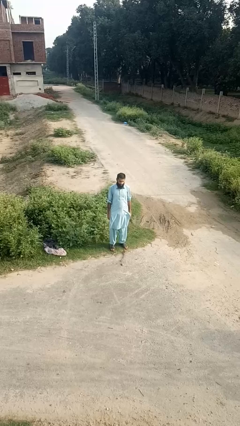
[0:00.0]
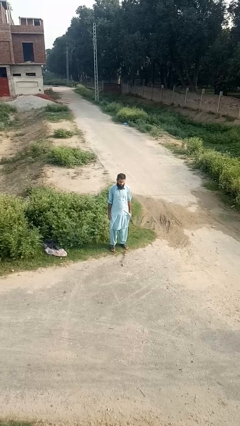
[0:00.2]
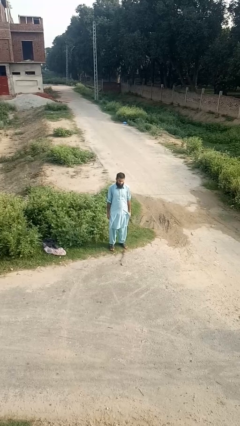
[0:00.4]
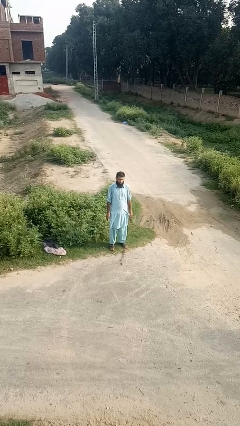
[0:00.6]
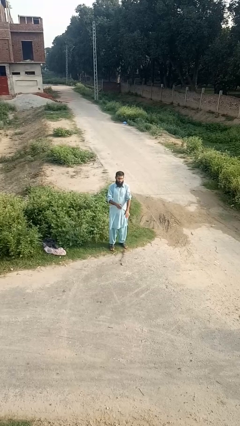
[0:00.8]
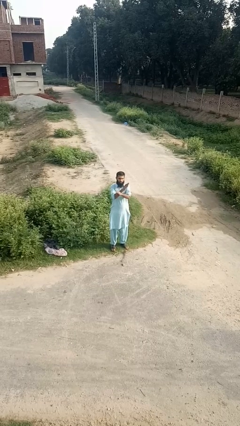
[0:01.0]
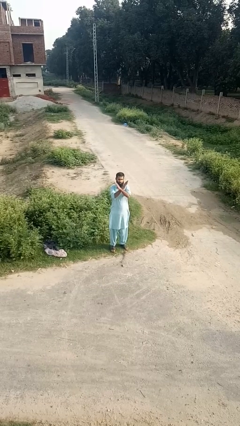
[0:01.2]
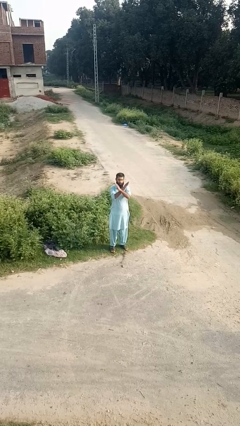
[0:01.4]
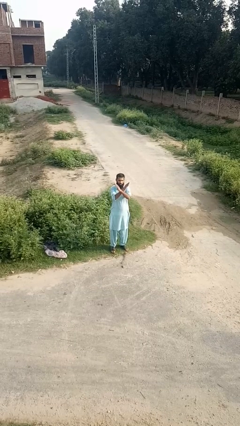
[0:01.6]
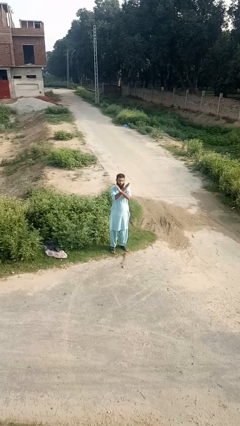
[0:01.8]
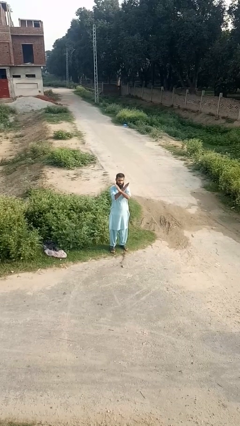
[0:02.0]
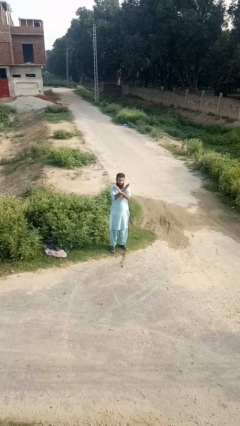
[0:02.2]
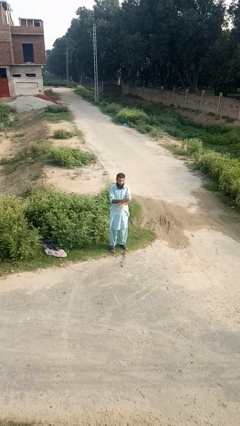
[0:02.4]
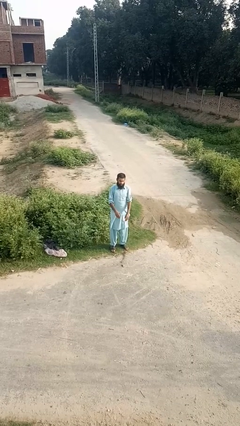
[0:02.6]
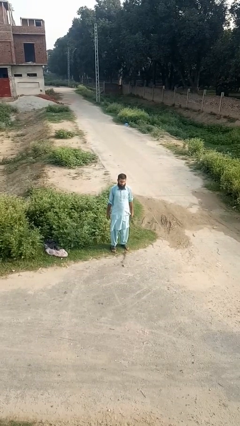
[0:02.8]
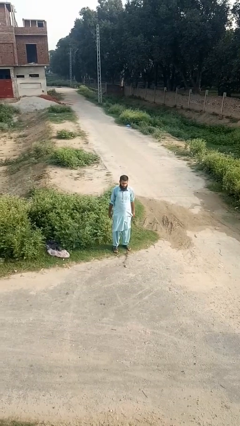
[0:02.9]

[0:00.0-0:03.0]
person crosses arms

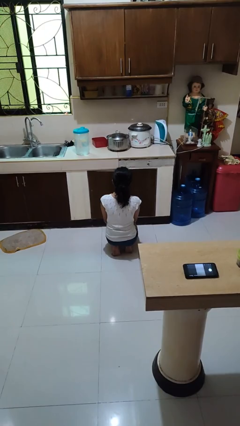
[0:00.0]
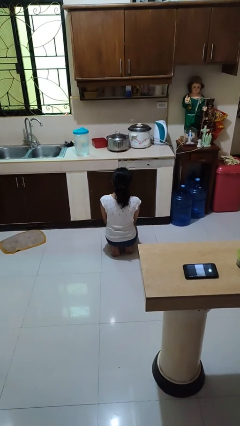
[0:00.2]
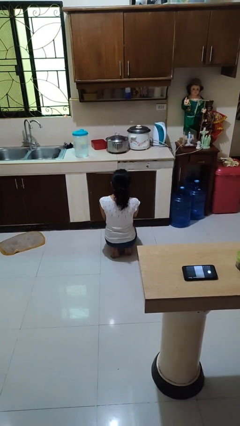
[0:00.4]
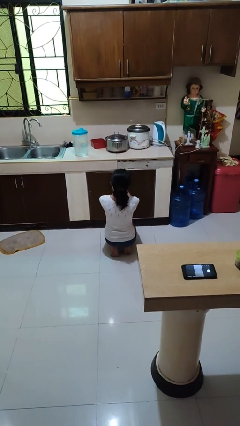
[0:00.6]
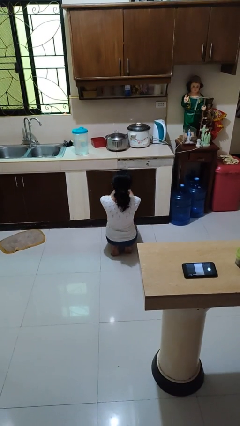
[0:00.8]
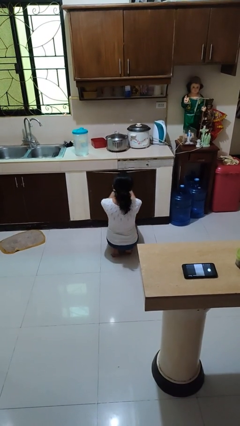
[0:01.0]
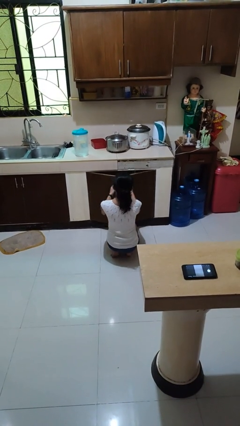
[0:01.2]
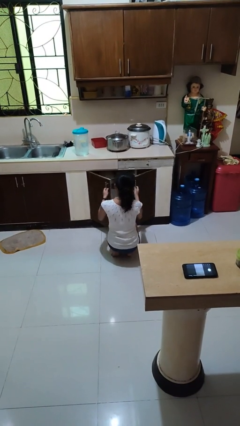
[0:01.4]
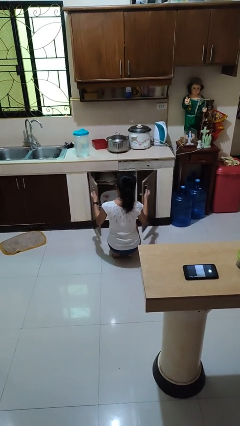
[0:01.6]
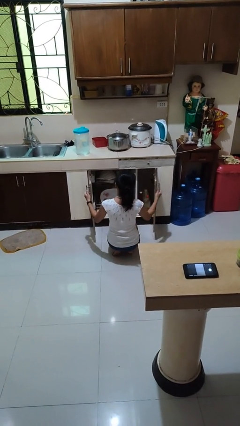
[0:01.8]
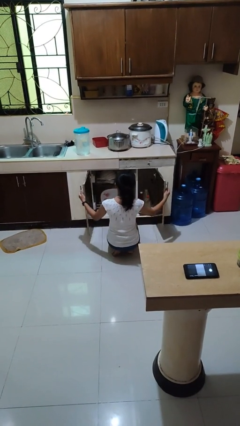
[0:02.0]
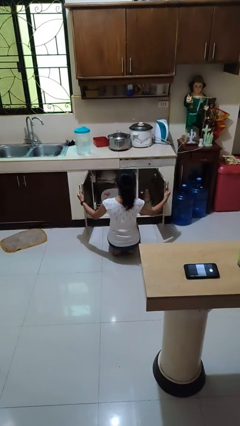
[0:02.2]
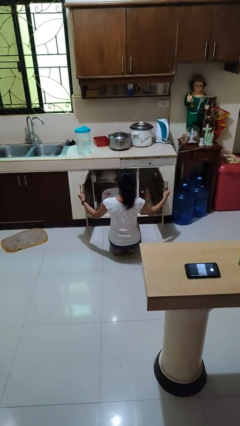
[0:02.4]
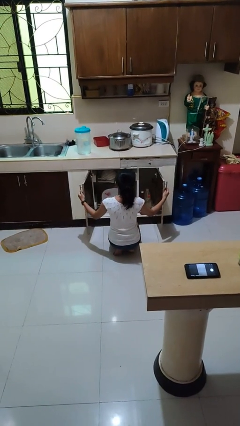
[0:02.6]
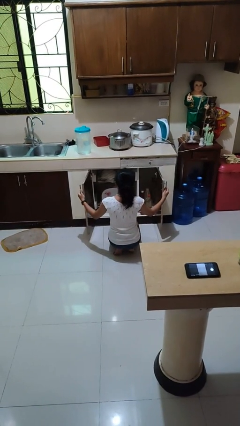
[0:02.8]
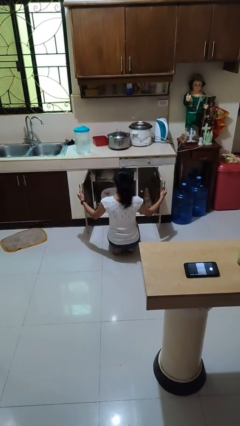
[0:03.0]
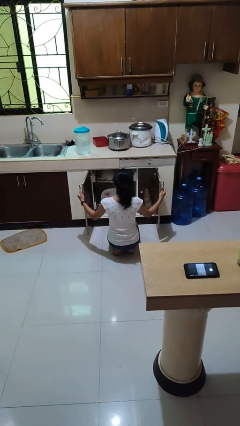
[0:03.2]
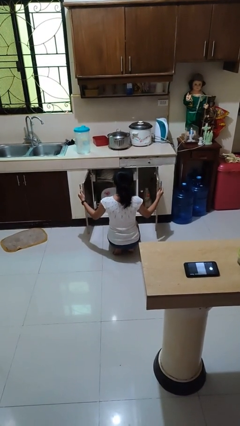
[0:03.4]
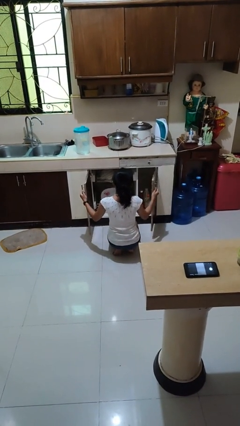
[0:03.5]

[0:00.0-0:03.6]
person opens dishwasher

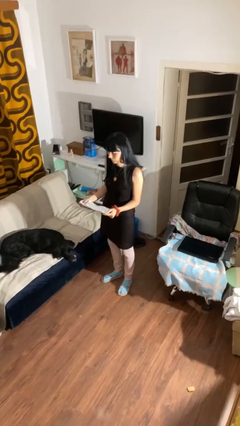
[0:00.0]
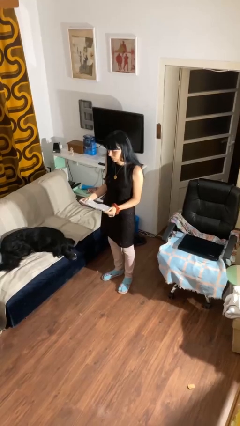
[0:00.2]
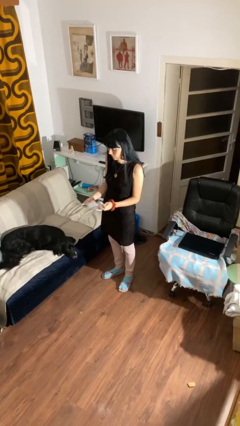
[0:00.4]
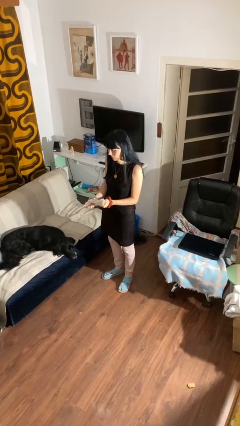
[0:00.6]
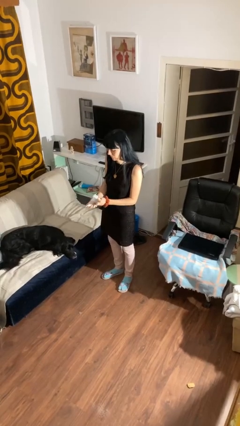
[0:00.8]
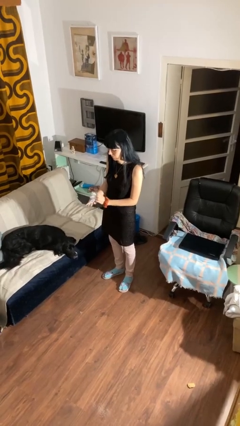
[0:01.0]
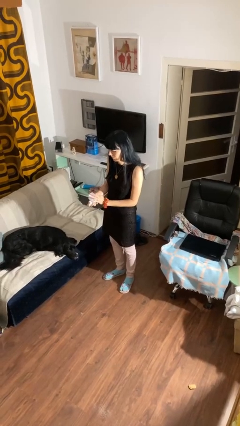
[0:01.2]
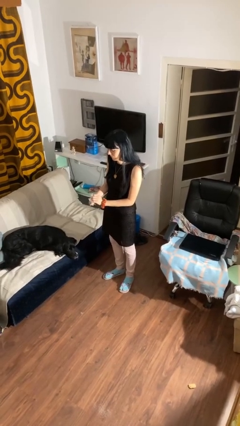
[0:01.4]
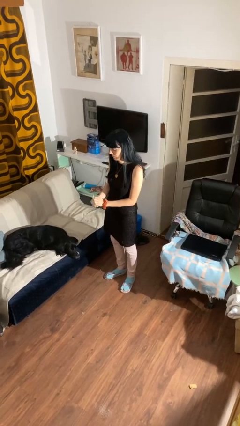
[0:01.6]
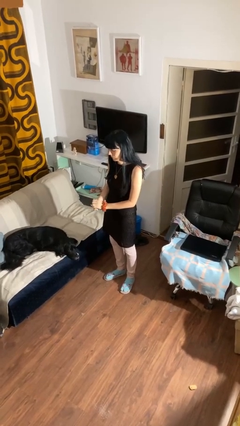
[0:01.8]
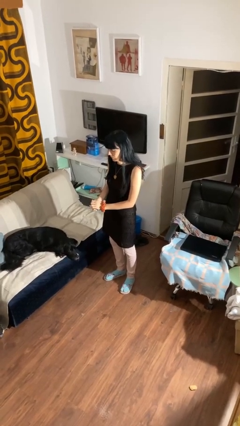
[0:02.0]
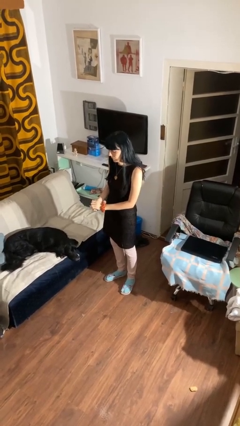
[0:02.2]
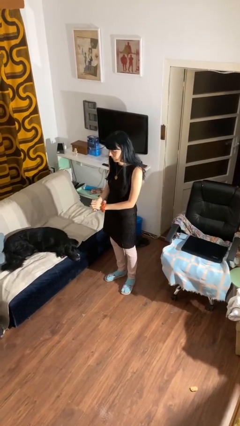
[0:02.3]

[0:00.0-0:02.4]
person crumples paper

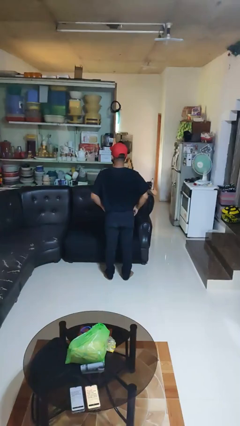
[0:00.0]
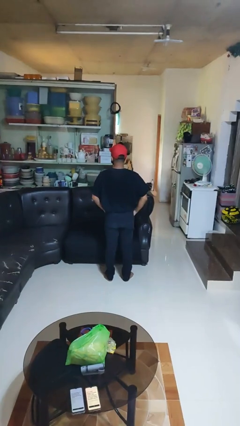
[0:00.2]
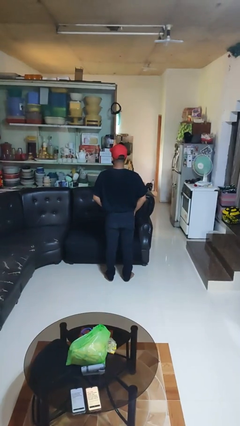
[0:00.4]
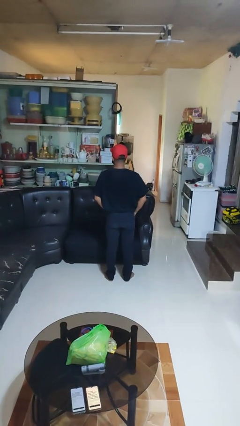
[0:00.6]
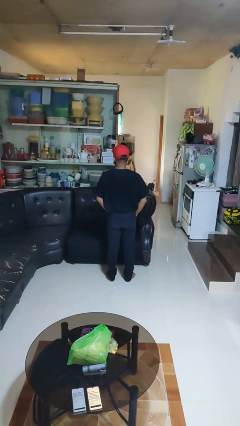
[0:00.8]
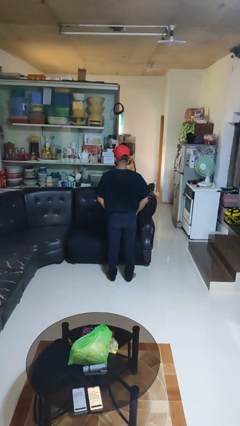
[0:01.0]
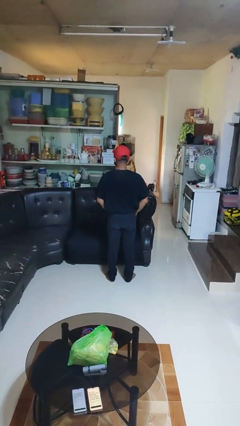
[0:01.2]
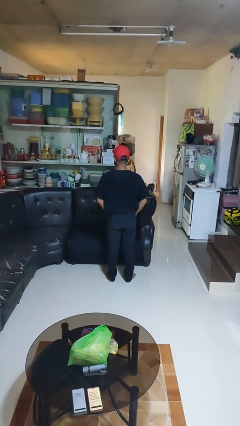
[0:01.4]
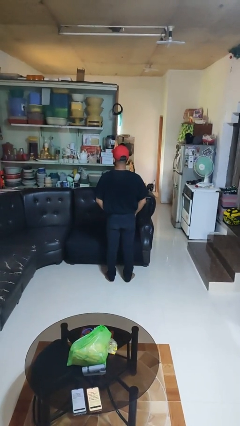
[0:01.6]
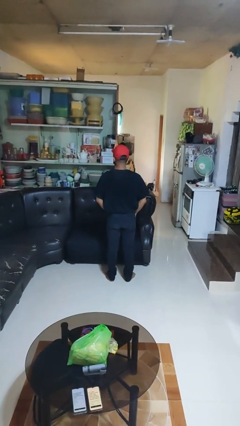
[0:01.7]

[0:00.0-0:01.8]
person puts hands in back pockets

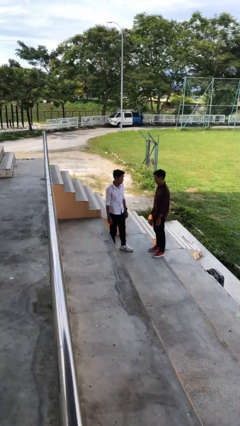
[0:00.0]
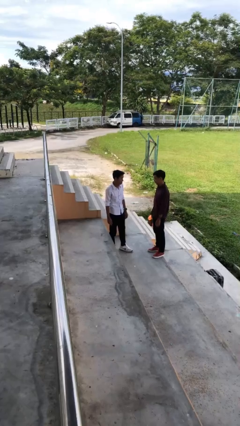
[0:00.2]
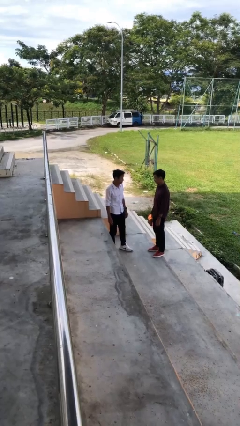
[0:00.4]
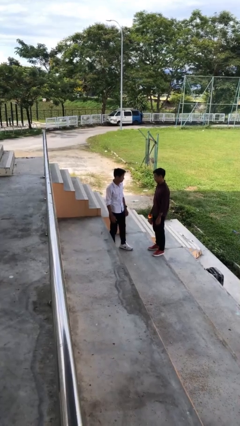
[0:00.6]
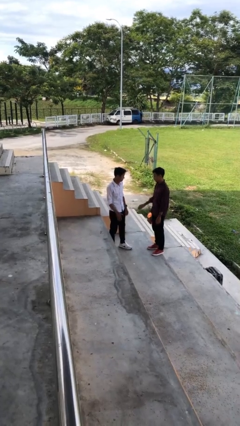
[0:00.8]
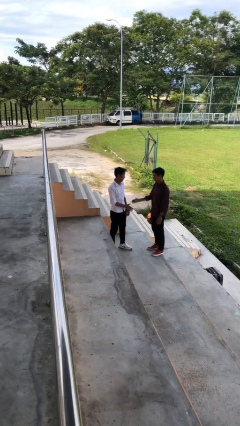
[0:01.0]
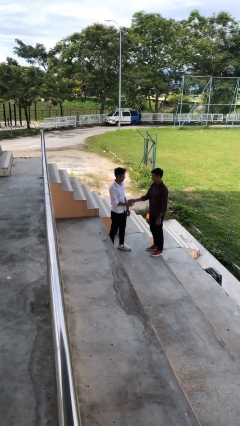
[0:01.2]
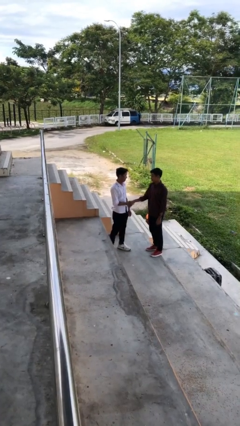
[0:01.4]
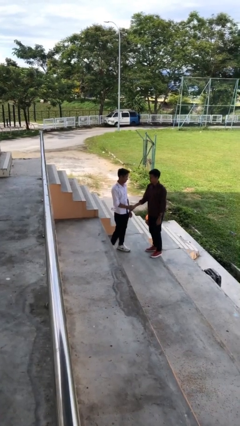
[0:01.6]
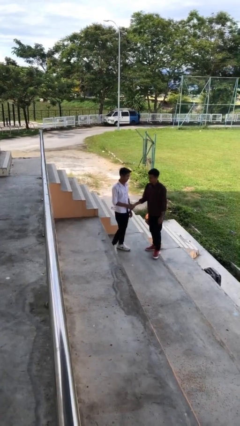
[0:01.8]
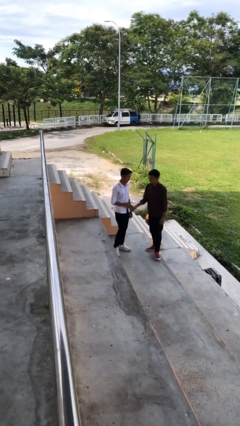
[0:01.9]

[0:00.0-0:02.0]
person shakes hand

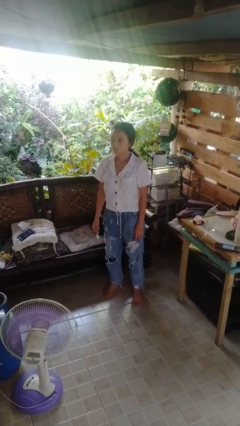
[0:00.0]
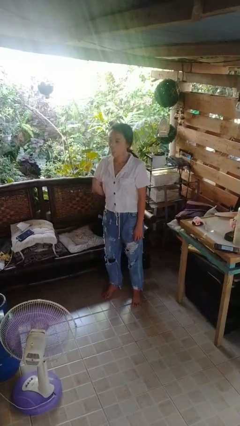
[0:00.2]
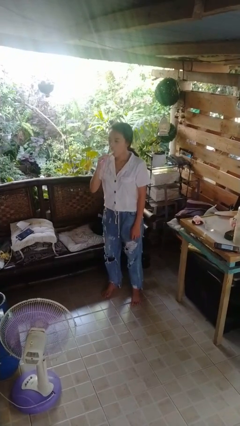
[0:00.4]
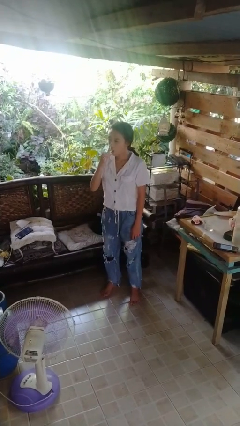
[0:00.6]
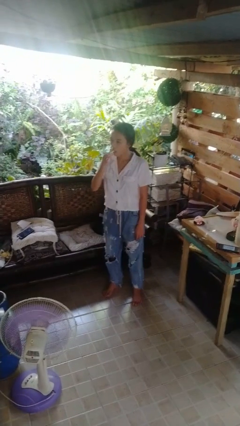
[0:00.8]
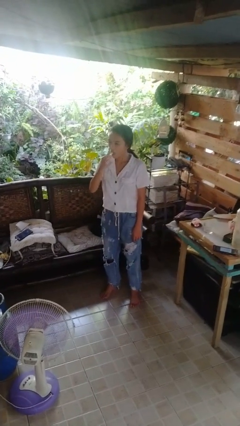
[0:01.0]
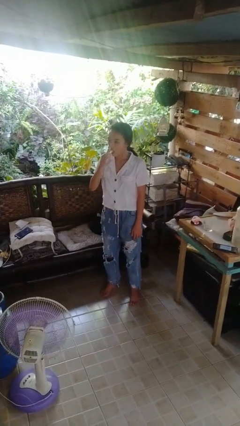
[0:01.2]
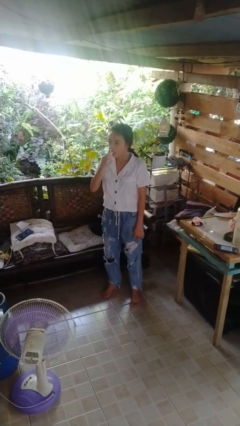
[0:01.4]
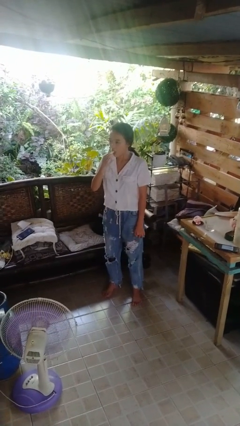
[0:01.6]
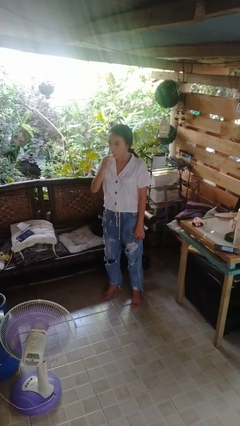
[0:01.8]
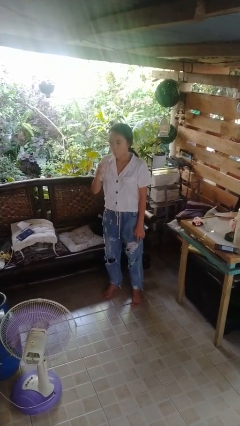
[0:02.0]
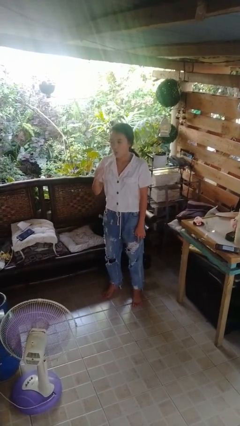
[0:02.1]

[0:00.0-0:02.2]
person brushes teeth

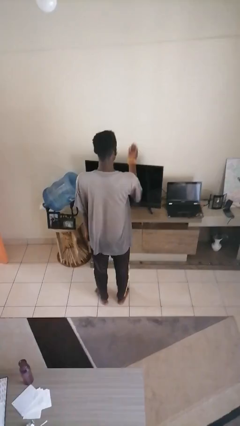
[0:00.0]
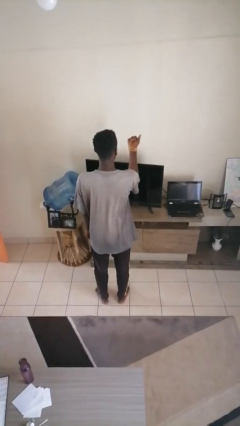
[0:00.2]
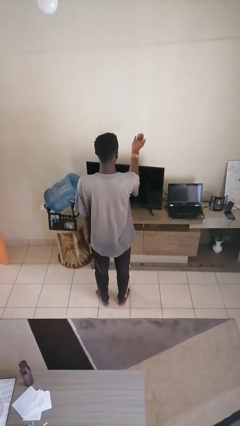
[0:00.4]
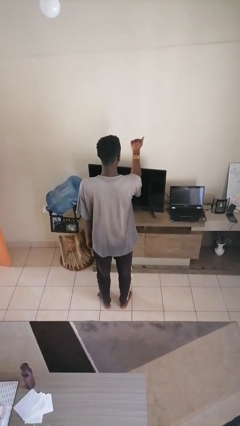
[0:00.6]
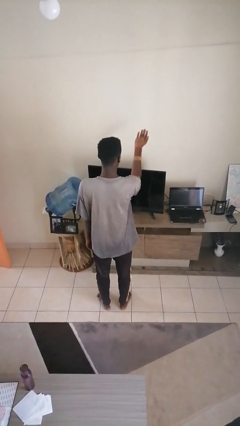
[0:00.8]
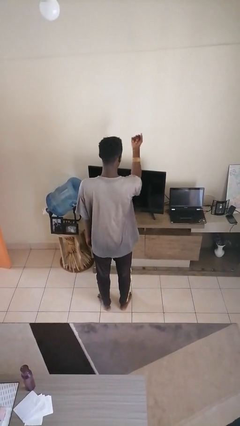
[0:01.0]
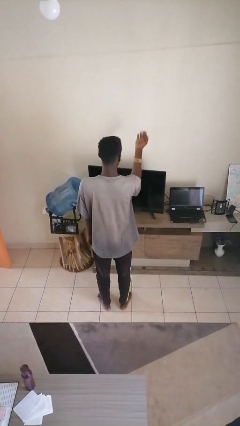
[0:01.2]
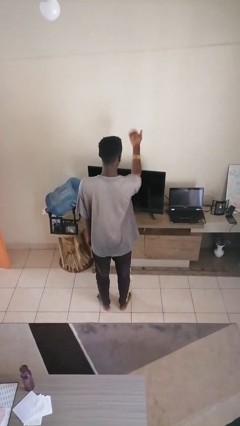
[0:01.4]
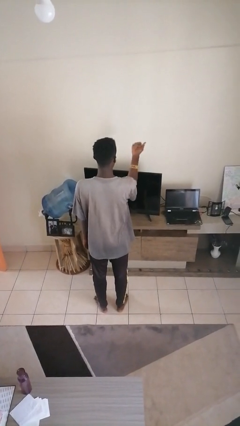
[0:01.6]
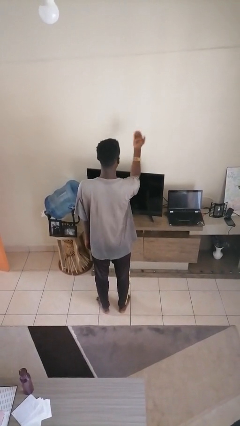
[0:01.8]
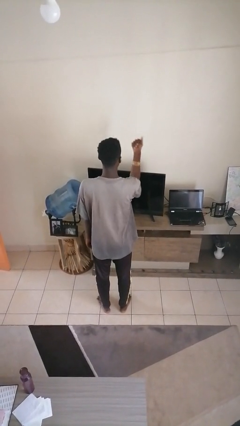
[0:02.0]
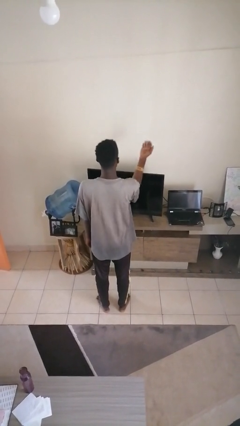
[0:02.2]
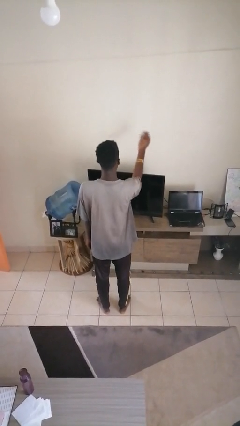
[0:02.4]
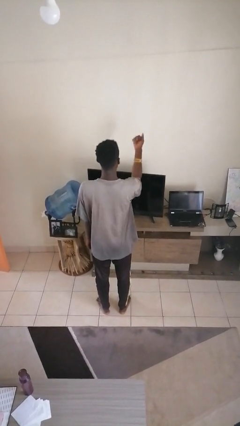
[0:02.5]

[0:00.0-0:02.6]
person gestures come here
